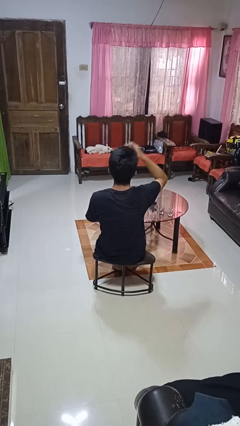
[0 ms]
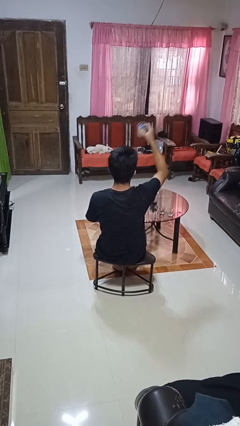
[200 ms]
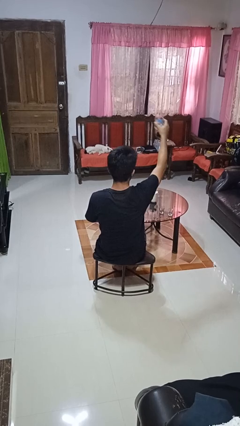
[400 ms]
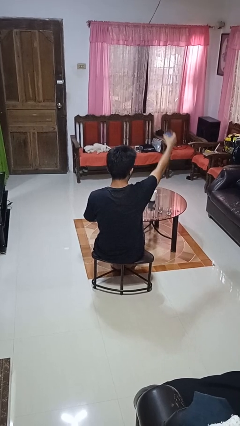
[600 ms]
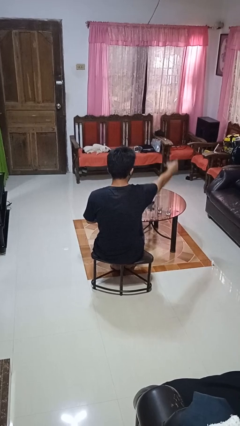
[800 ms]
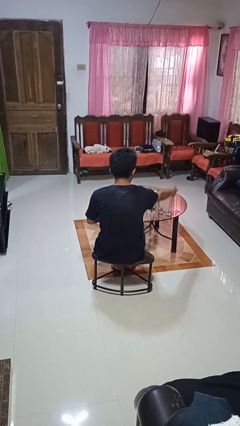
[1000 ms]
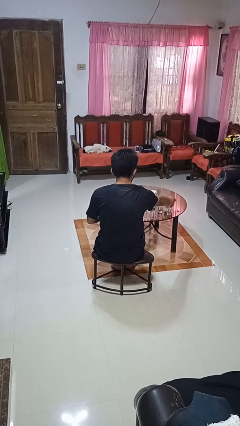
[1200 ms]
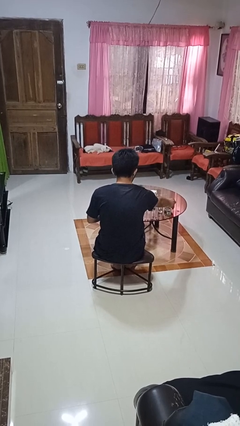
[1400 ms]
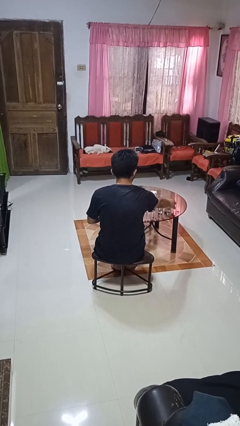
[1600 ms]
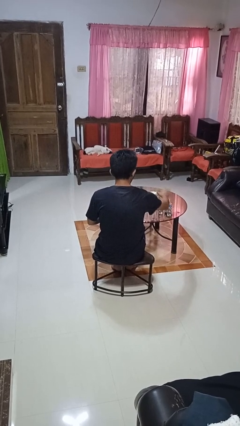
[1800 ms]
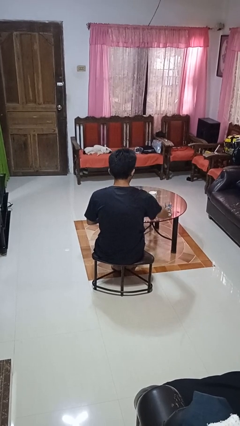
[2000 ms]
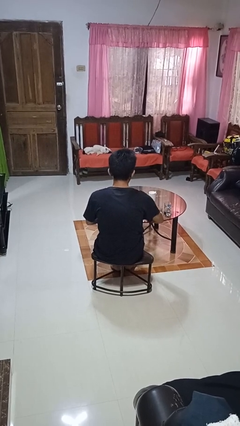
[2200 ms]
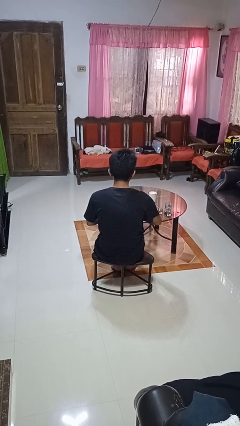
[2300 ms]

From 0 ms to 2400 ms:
person puts down object on table

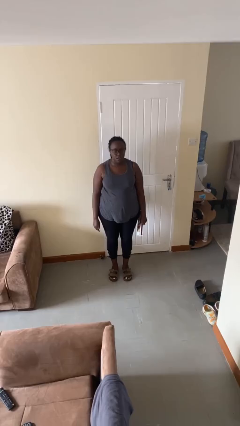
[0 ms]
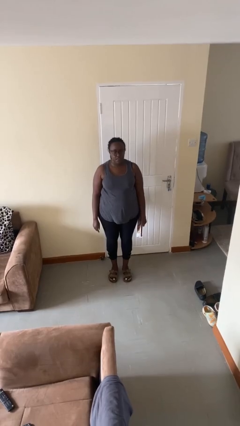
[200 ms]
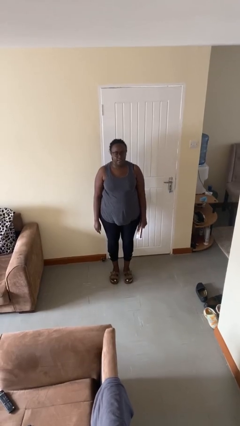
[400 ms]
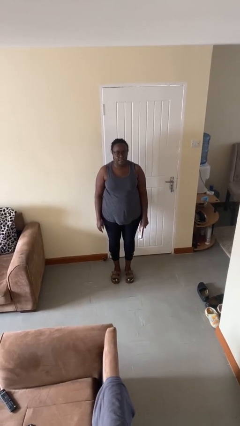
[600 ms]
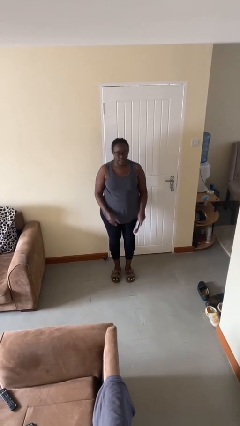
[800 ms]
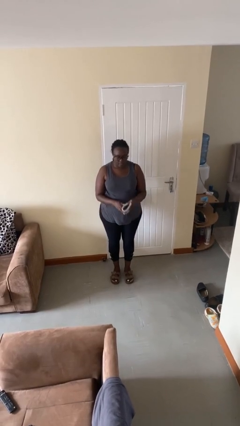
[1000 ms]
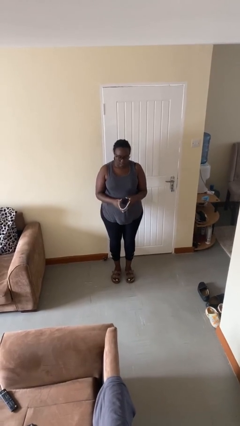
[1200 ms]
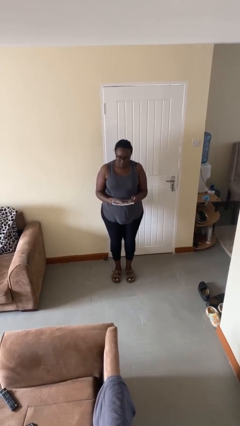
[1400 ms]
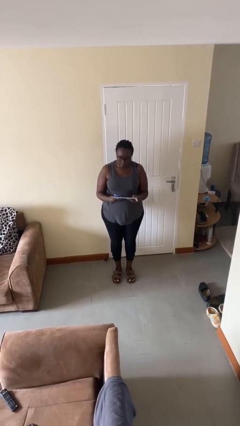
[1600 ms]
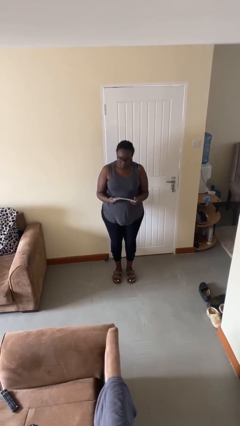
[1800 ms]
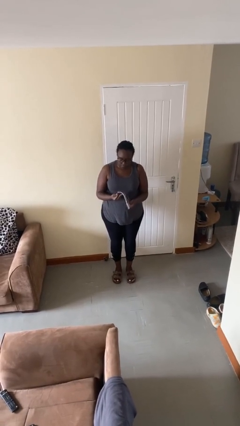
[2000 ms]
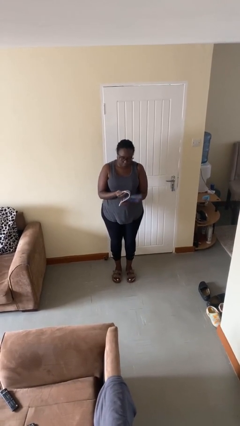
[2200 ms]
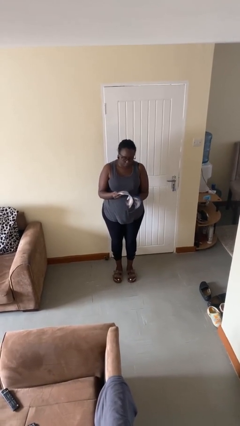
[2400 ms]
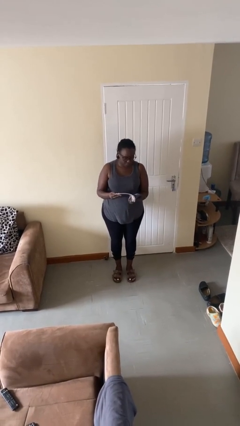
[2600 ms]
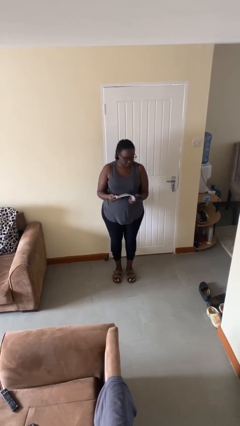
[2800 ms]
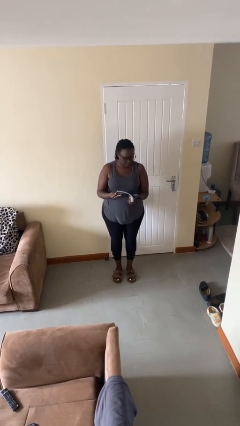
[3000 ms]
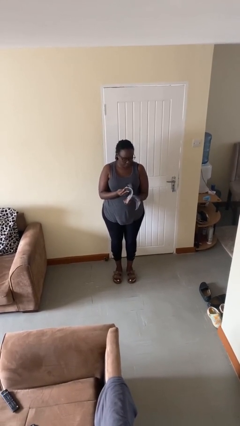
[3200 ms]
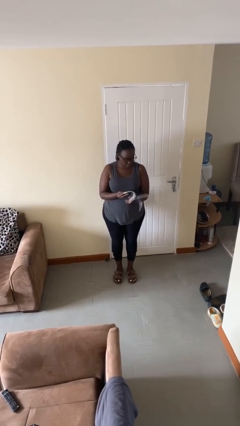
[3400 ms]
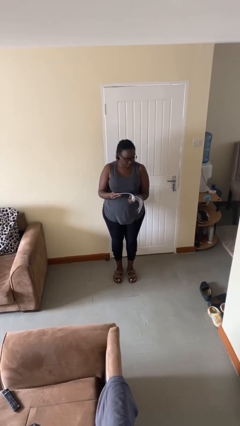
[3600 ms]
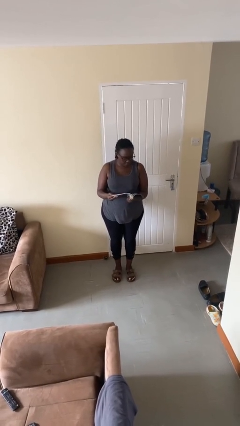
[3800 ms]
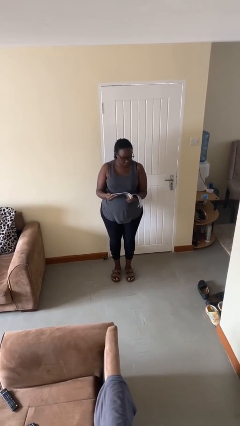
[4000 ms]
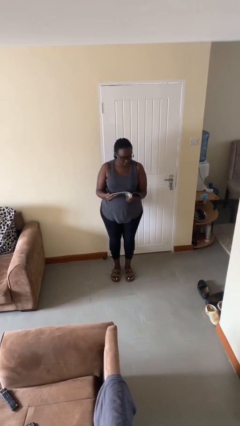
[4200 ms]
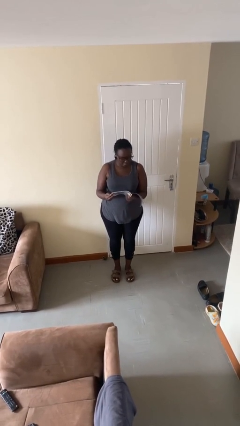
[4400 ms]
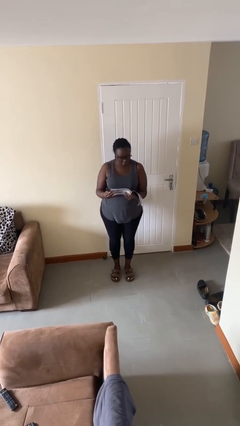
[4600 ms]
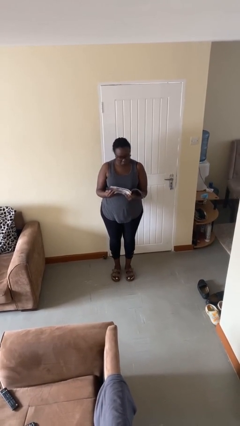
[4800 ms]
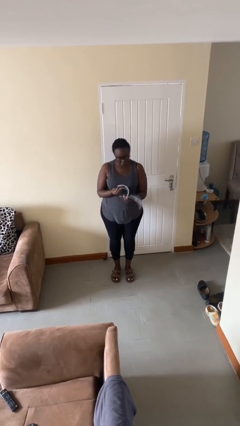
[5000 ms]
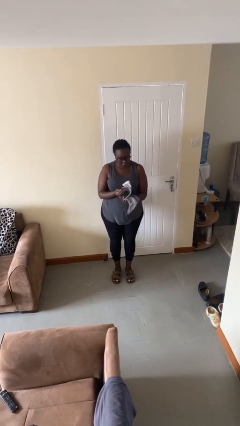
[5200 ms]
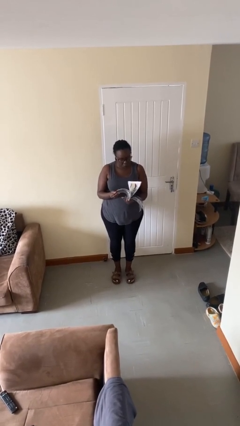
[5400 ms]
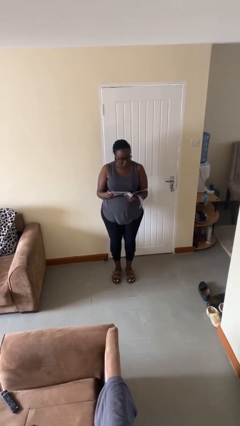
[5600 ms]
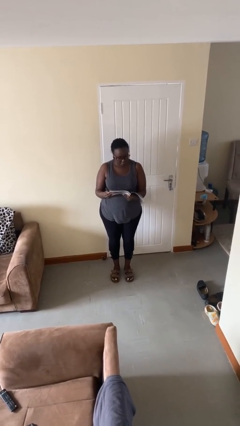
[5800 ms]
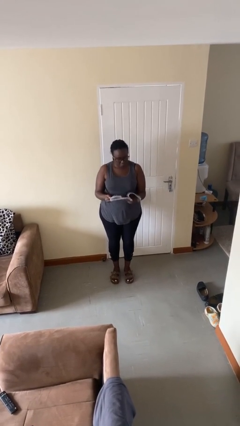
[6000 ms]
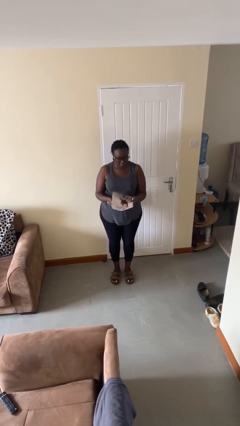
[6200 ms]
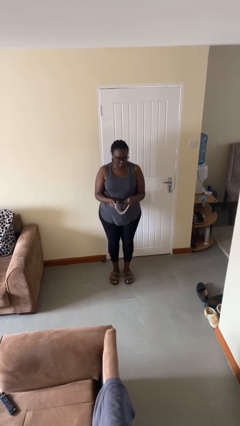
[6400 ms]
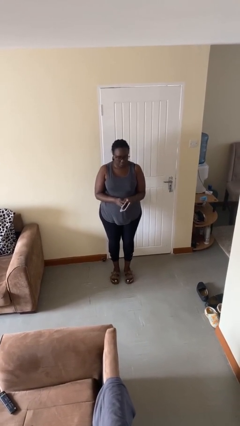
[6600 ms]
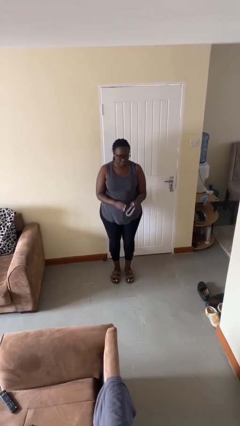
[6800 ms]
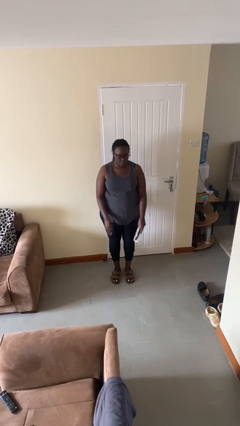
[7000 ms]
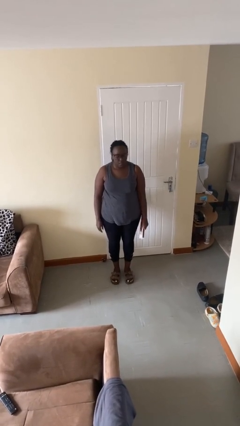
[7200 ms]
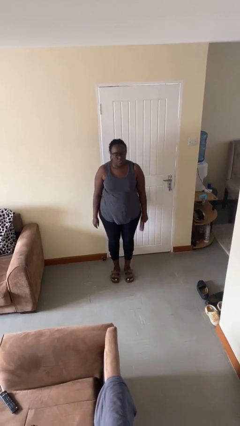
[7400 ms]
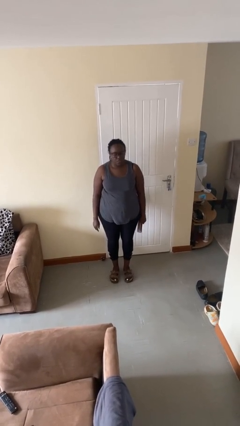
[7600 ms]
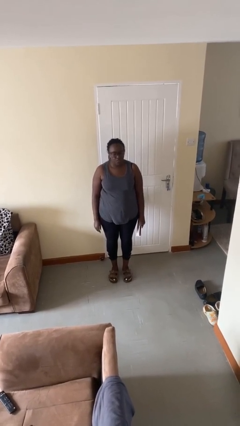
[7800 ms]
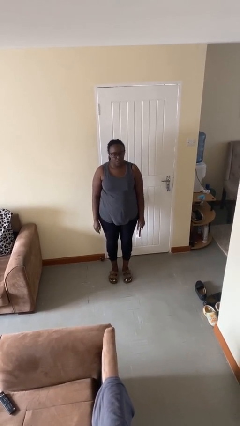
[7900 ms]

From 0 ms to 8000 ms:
person reads magazine

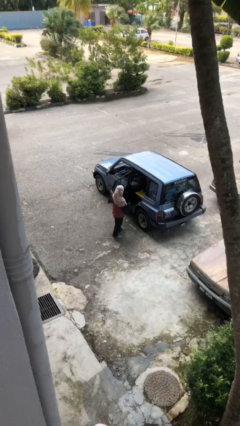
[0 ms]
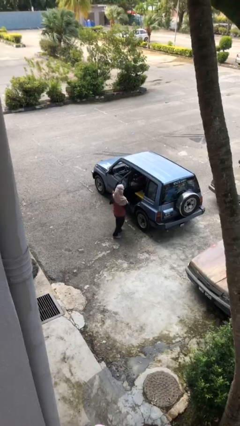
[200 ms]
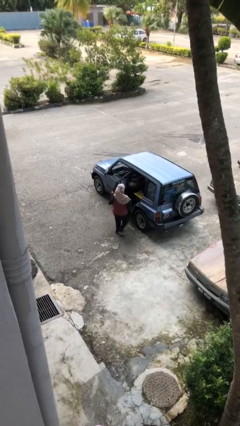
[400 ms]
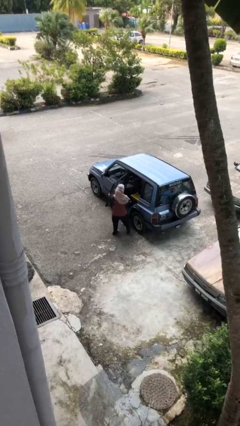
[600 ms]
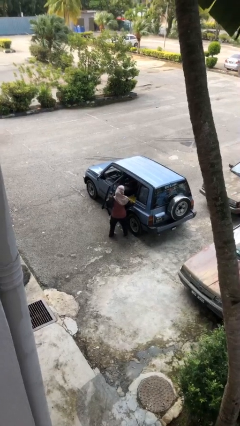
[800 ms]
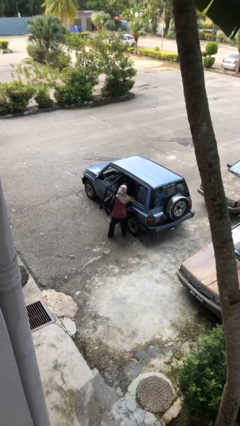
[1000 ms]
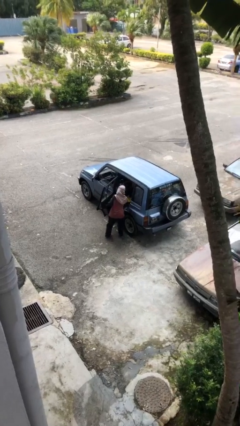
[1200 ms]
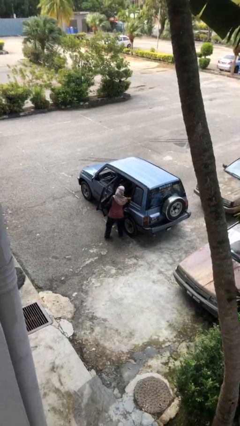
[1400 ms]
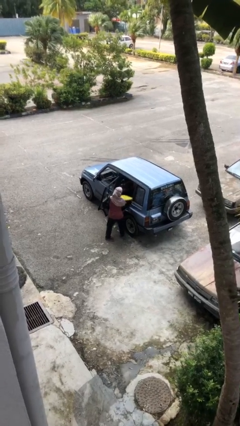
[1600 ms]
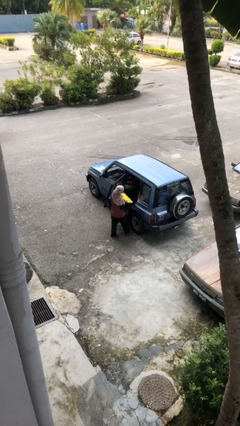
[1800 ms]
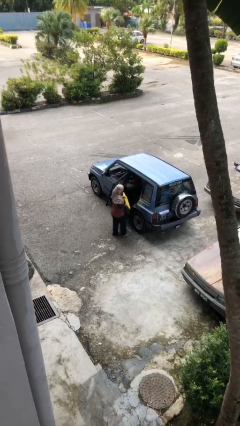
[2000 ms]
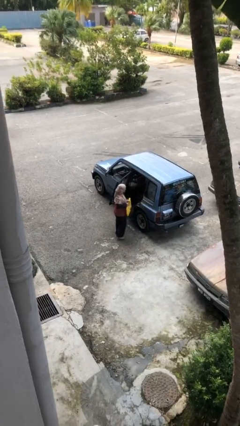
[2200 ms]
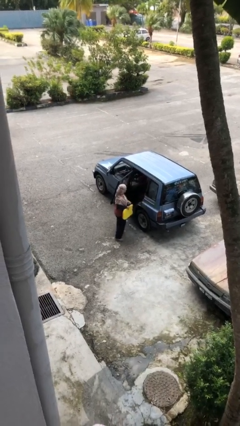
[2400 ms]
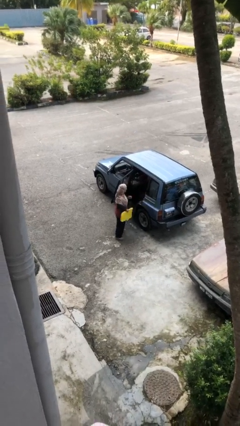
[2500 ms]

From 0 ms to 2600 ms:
person unloads car

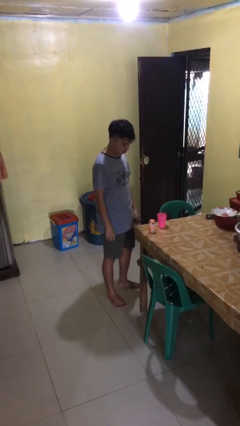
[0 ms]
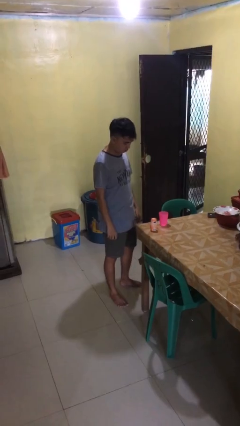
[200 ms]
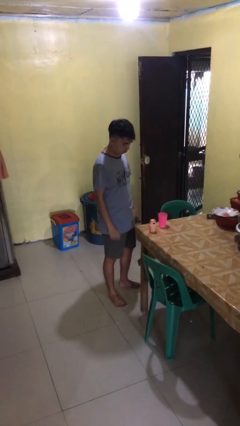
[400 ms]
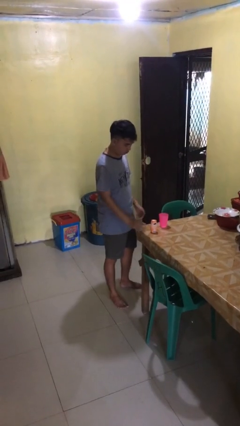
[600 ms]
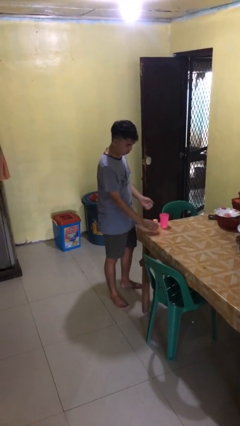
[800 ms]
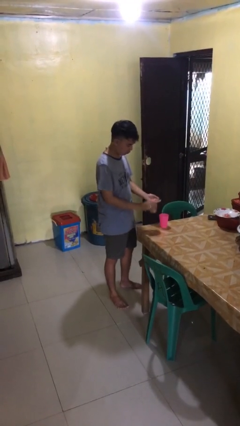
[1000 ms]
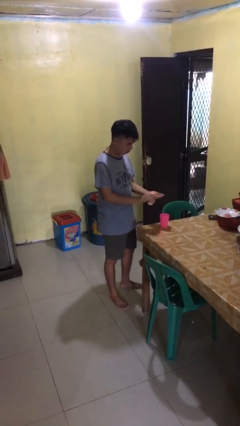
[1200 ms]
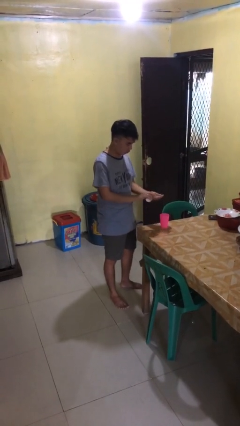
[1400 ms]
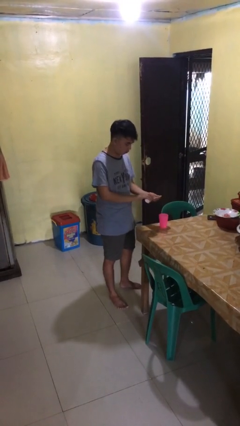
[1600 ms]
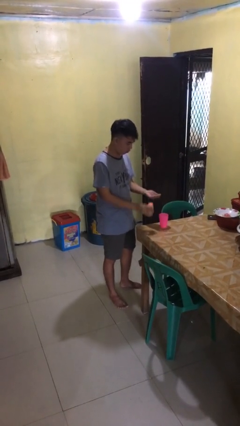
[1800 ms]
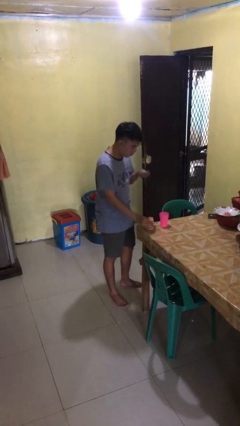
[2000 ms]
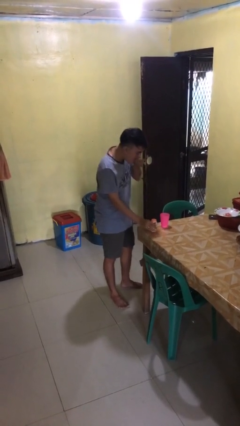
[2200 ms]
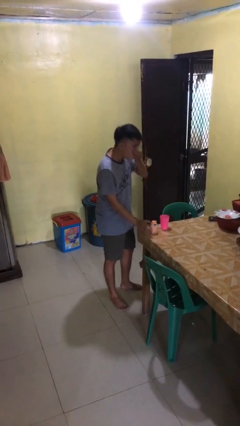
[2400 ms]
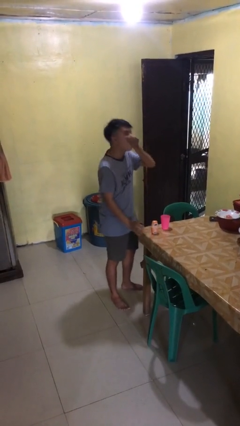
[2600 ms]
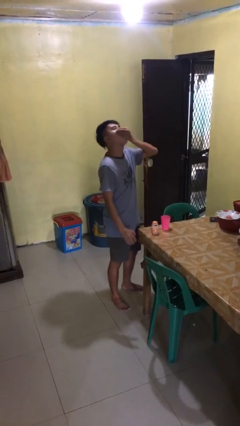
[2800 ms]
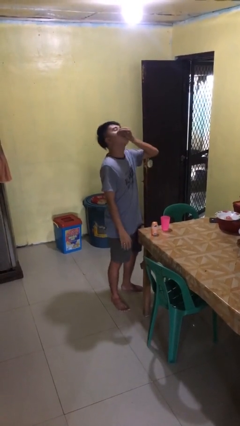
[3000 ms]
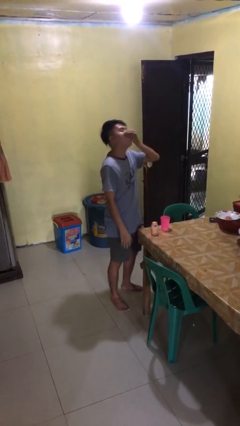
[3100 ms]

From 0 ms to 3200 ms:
person takes medicine pills

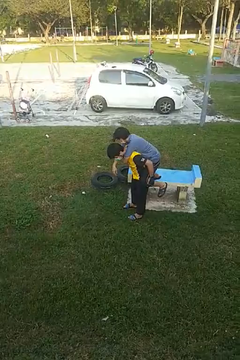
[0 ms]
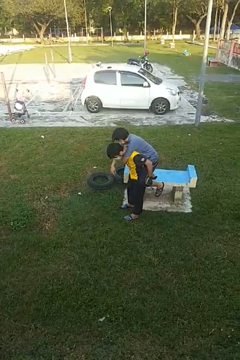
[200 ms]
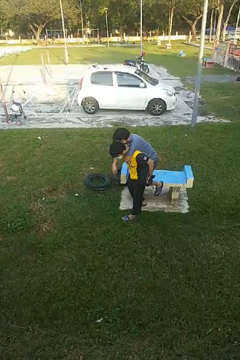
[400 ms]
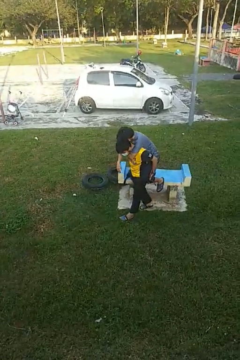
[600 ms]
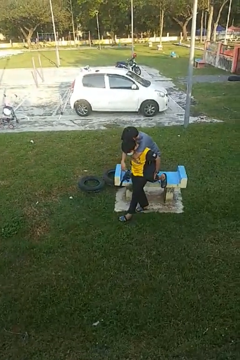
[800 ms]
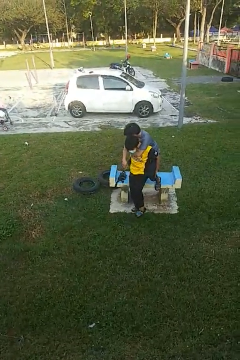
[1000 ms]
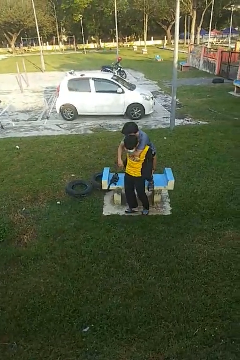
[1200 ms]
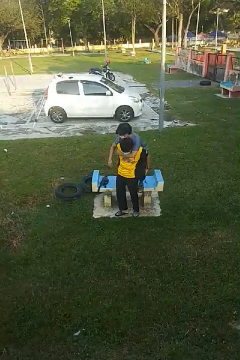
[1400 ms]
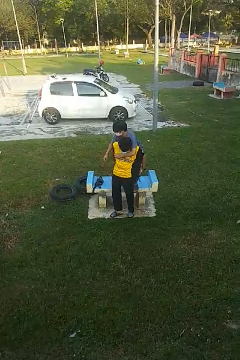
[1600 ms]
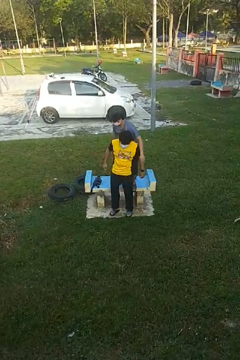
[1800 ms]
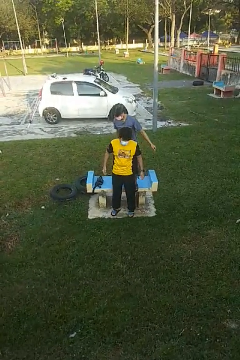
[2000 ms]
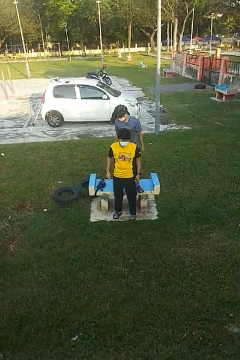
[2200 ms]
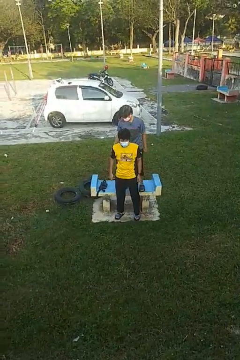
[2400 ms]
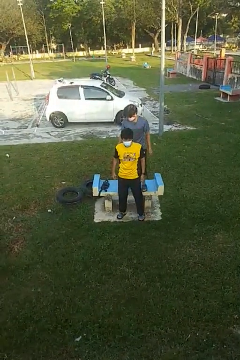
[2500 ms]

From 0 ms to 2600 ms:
person puts down person
